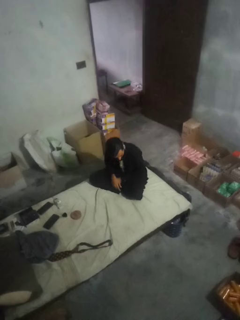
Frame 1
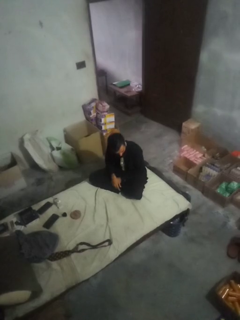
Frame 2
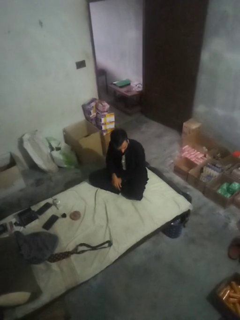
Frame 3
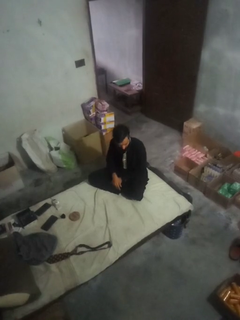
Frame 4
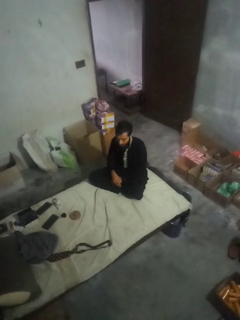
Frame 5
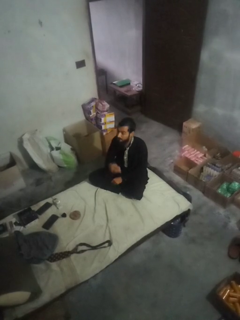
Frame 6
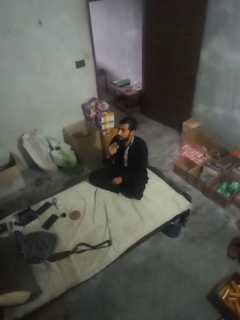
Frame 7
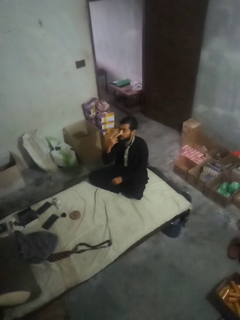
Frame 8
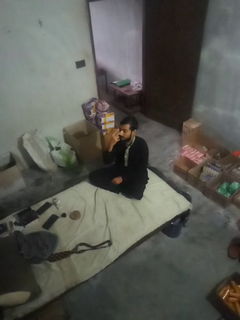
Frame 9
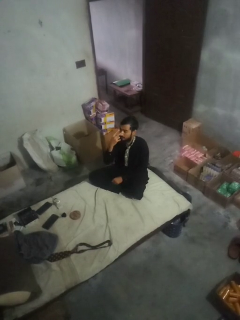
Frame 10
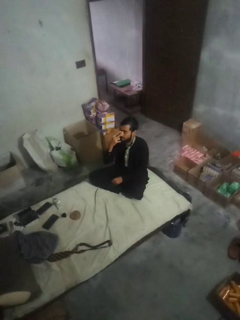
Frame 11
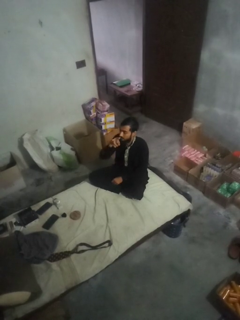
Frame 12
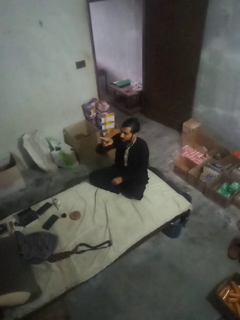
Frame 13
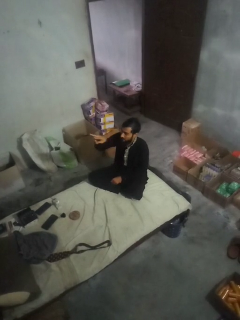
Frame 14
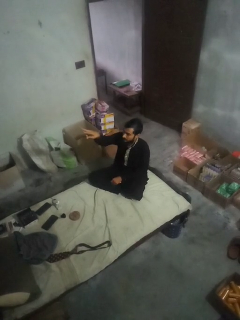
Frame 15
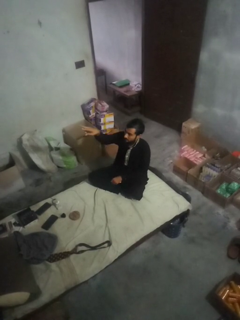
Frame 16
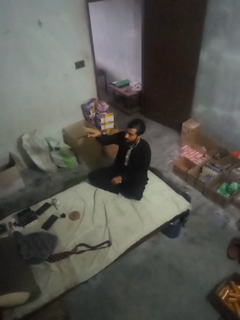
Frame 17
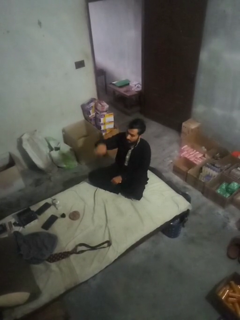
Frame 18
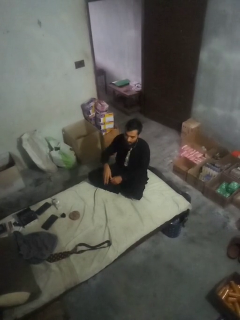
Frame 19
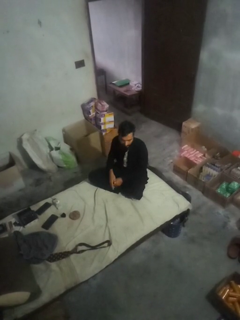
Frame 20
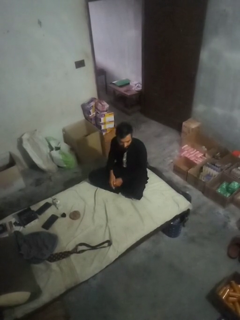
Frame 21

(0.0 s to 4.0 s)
person gestures watch closely

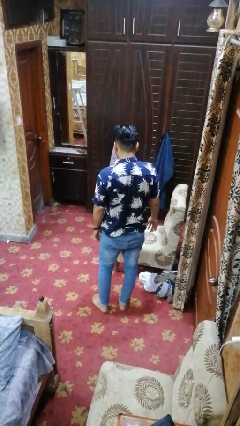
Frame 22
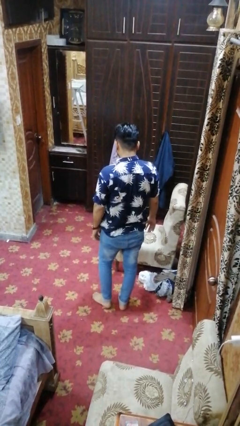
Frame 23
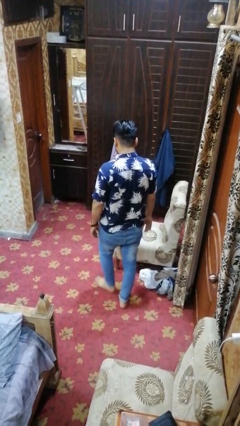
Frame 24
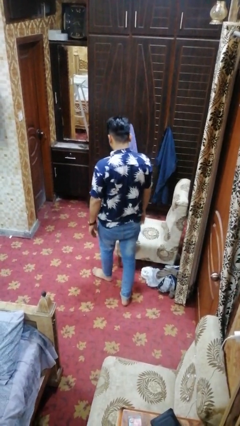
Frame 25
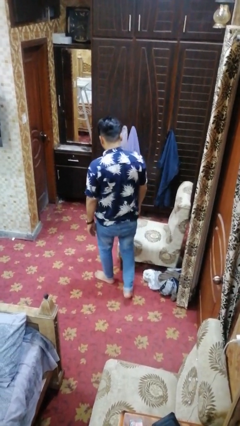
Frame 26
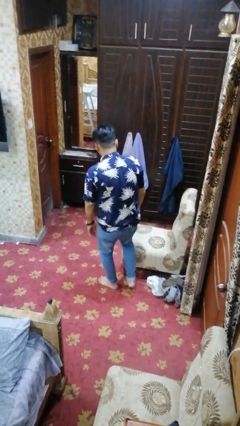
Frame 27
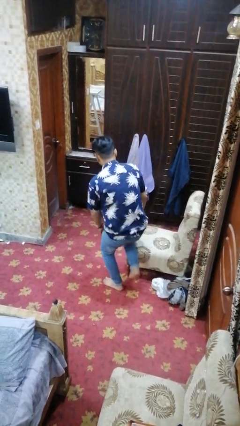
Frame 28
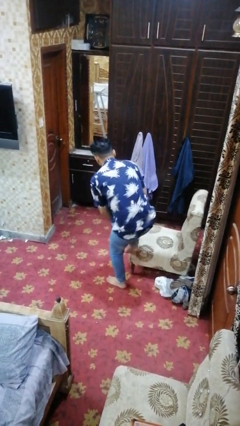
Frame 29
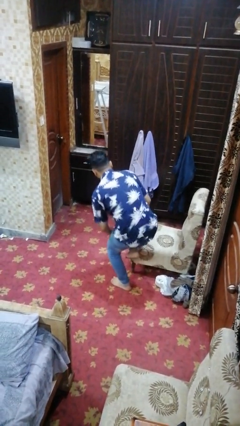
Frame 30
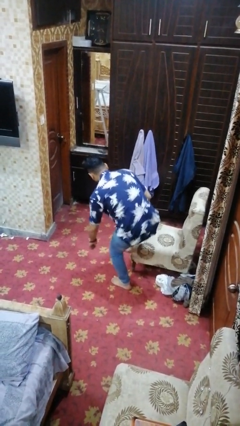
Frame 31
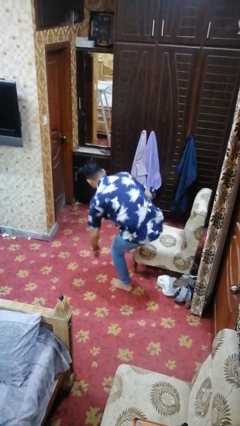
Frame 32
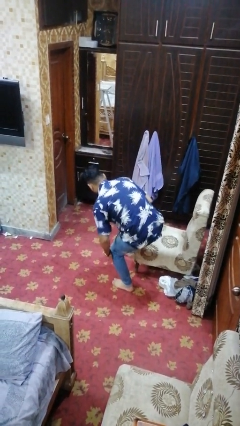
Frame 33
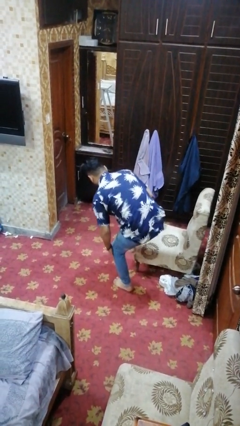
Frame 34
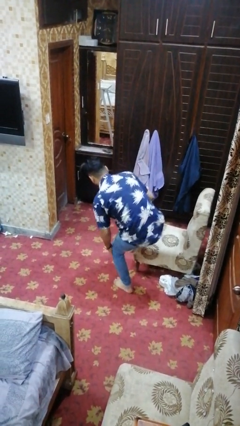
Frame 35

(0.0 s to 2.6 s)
person trips on object on floor

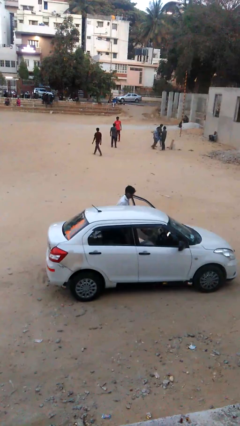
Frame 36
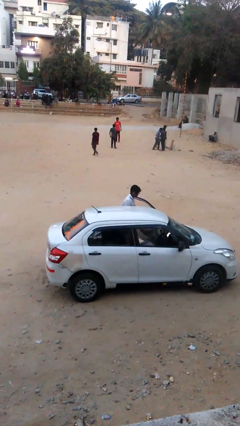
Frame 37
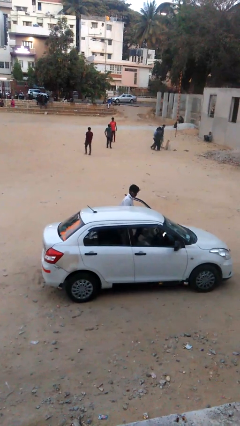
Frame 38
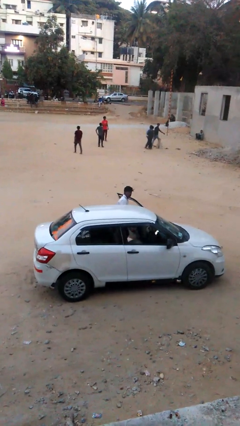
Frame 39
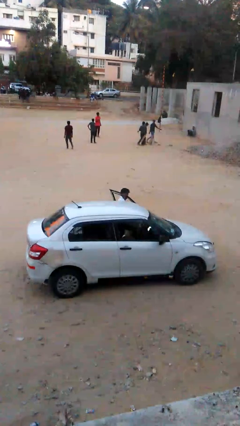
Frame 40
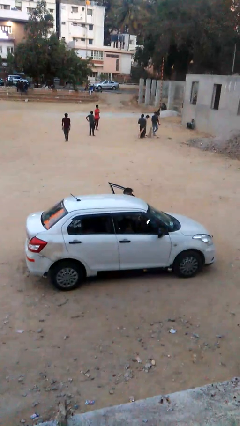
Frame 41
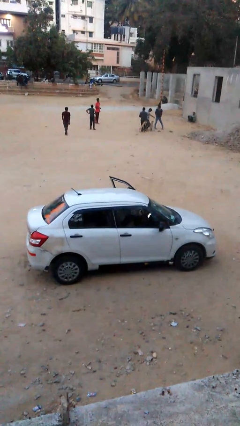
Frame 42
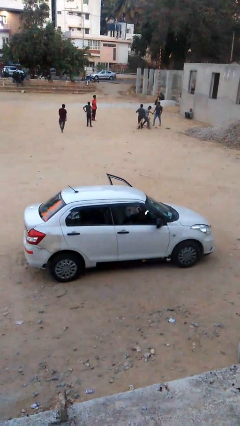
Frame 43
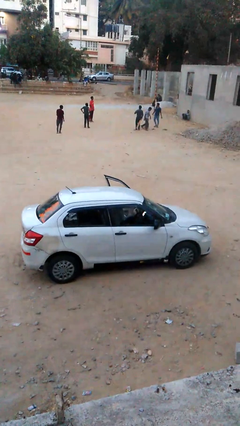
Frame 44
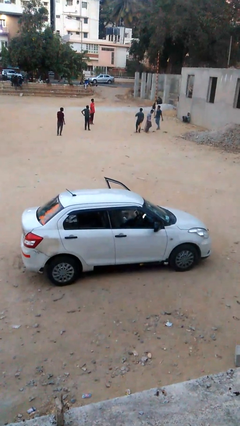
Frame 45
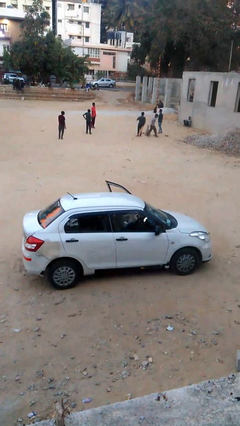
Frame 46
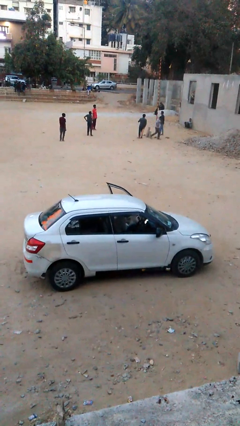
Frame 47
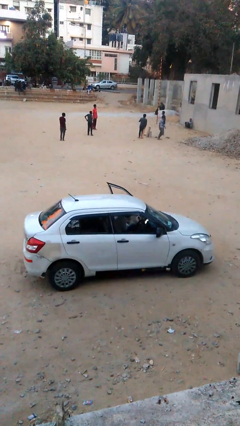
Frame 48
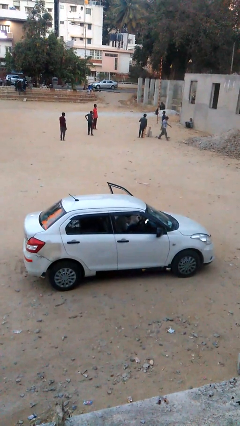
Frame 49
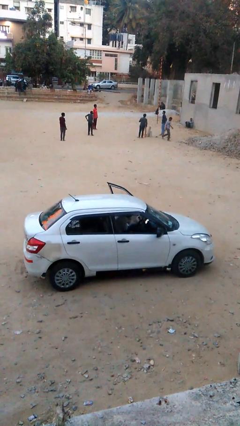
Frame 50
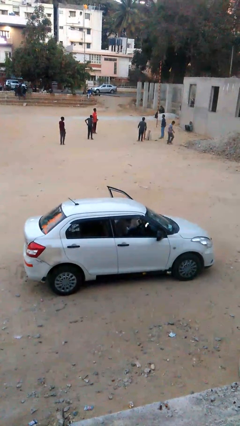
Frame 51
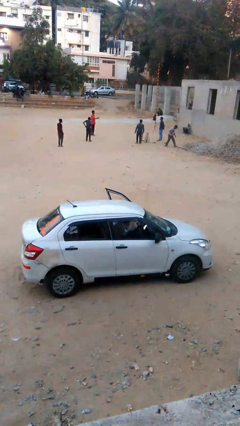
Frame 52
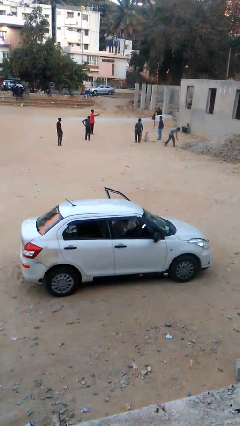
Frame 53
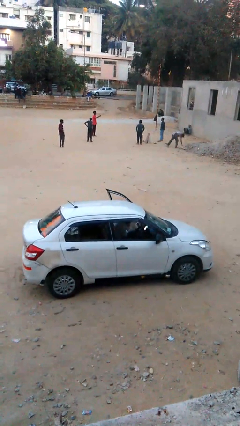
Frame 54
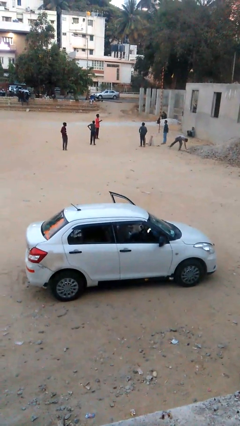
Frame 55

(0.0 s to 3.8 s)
person enters car

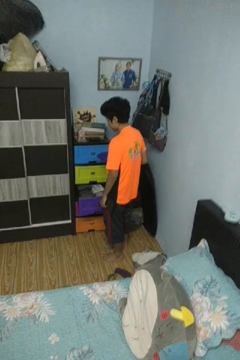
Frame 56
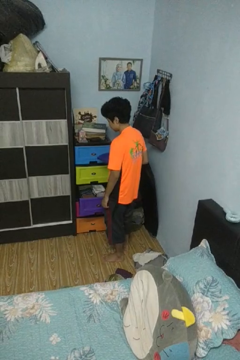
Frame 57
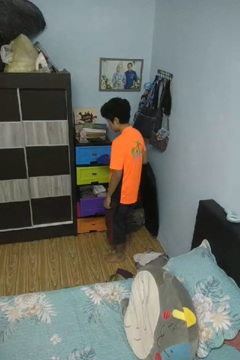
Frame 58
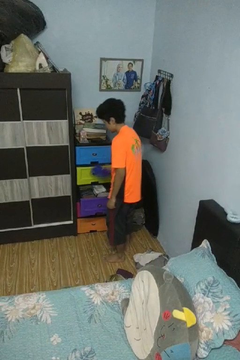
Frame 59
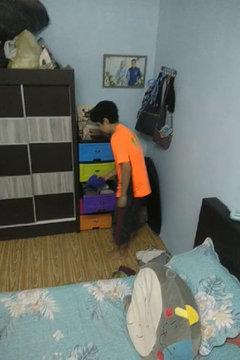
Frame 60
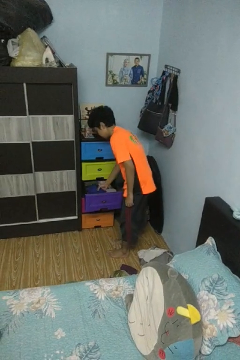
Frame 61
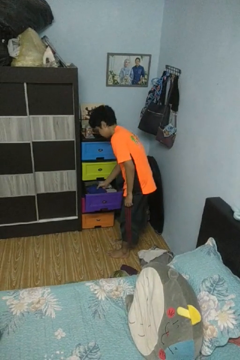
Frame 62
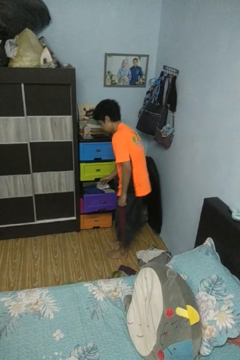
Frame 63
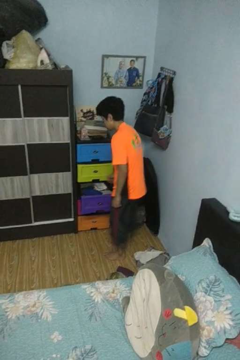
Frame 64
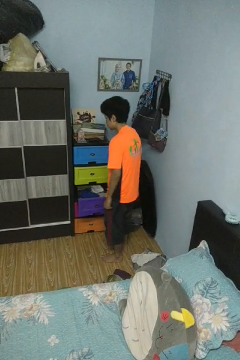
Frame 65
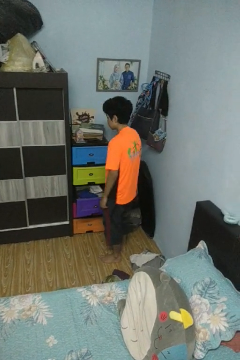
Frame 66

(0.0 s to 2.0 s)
person puts clothes into dresser

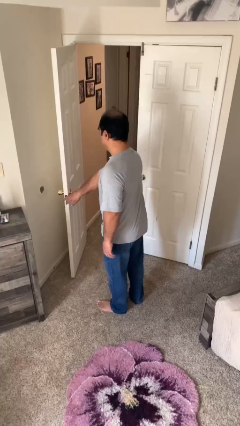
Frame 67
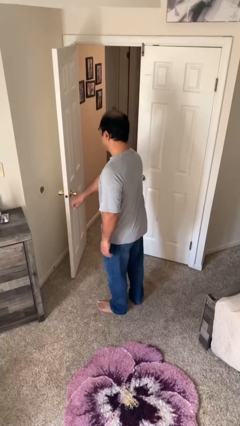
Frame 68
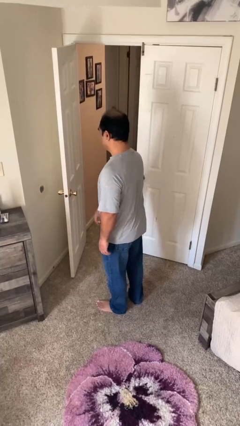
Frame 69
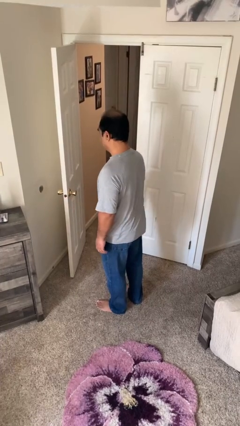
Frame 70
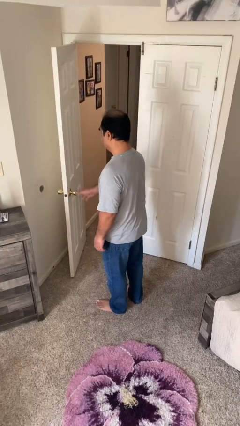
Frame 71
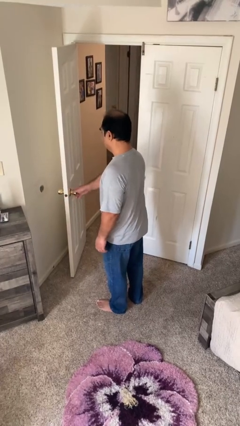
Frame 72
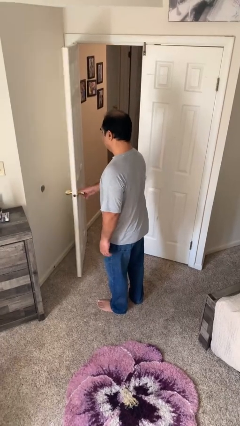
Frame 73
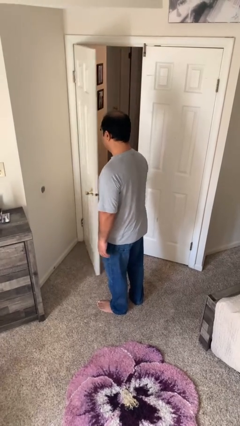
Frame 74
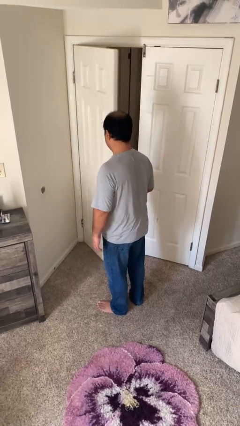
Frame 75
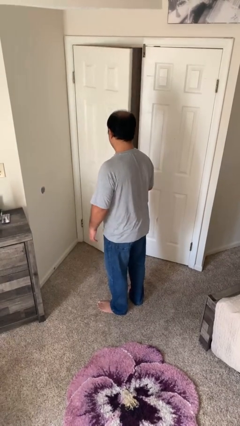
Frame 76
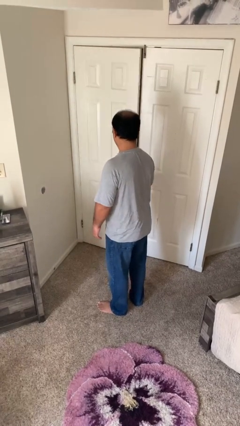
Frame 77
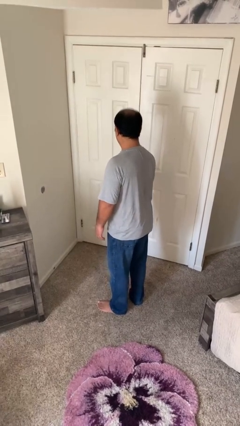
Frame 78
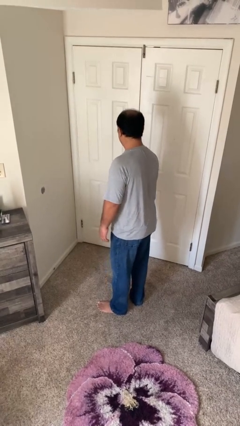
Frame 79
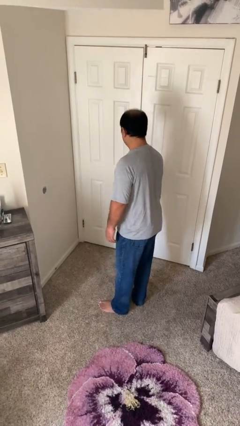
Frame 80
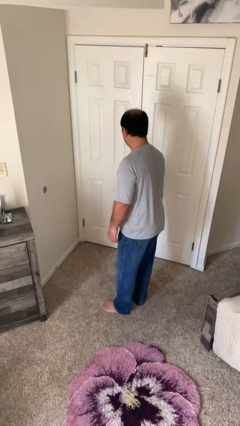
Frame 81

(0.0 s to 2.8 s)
person closes facility door

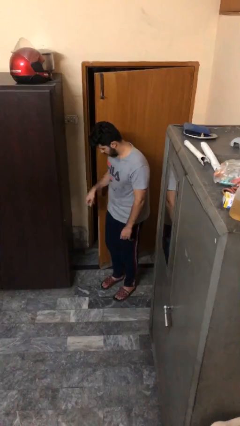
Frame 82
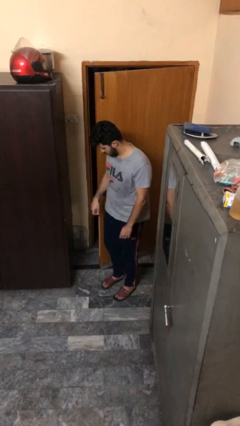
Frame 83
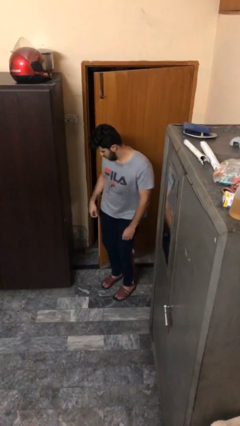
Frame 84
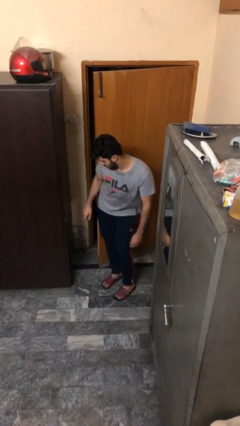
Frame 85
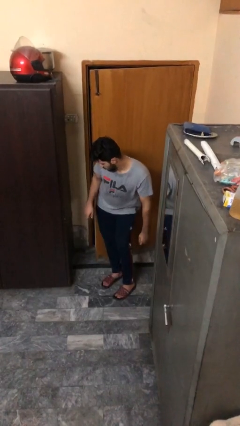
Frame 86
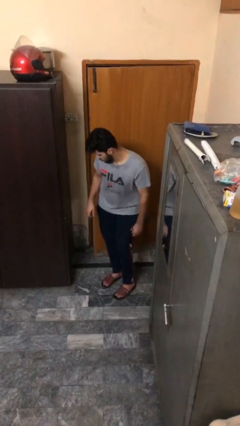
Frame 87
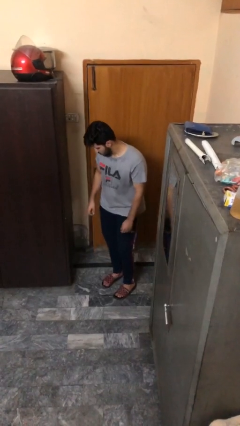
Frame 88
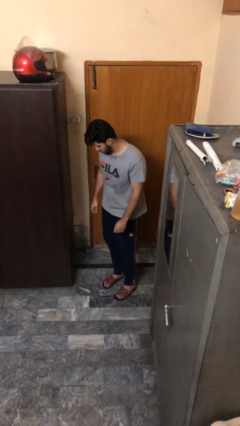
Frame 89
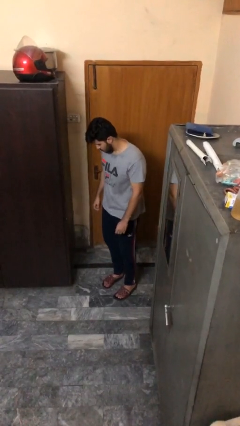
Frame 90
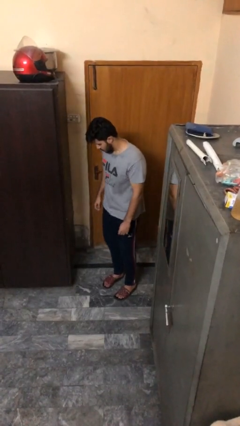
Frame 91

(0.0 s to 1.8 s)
person closes door with hip

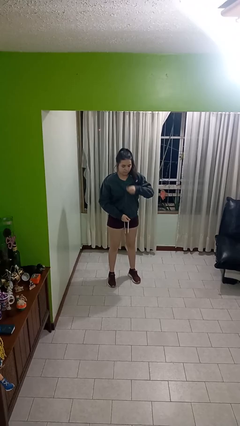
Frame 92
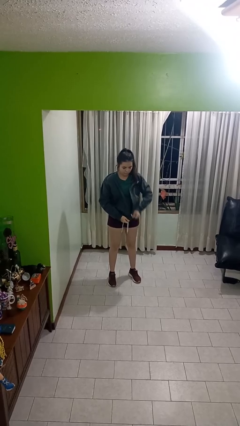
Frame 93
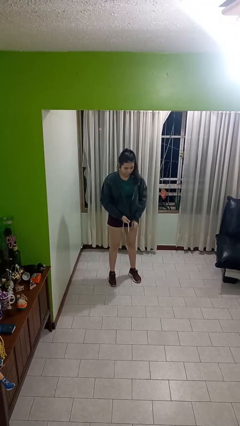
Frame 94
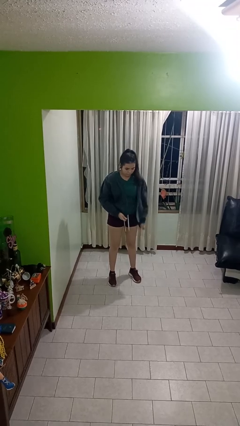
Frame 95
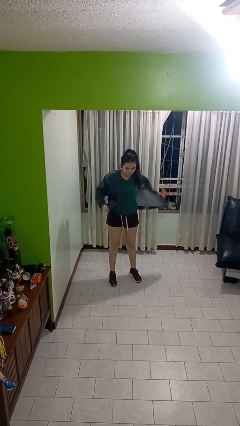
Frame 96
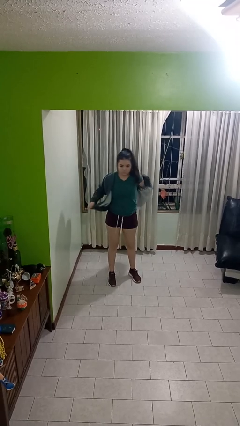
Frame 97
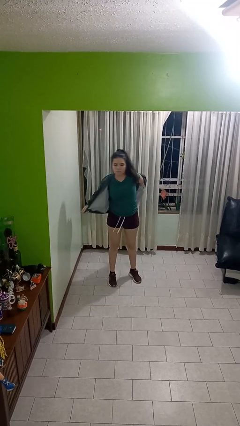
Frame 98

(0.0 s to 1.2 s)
person unzips jacket

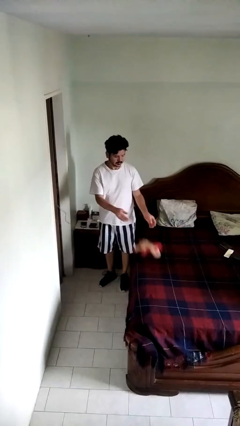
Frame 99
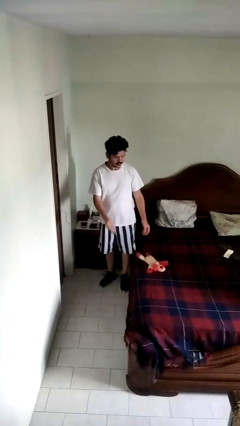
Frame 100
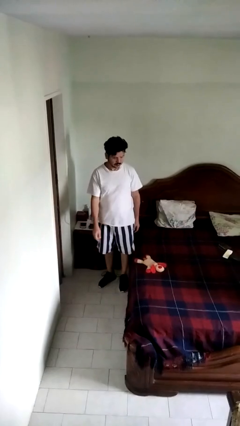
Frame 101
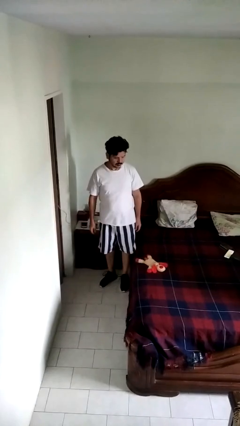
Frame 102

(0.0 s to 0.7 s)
person throws object on bed
